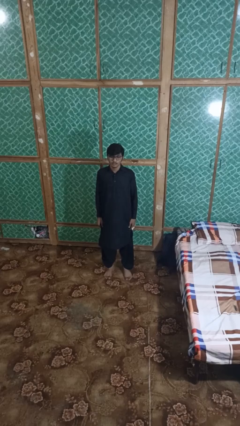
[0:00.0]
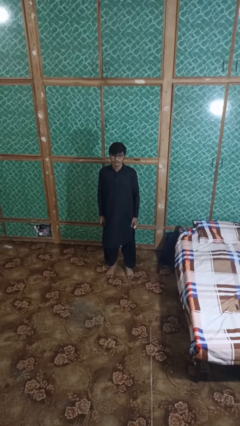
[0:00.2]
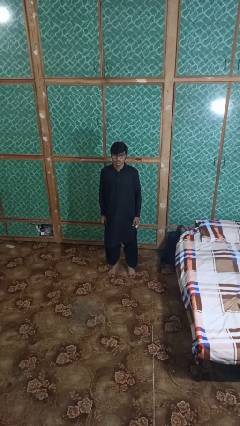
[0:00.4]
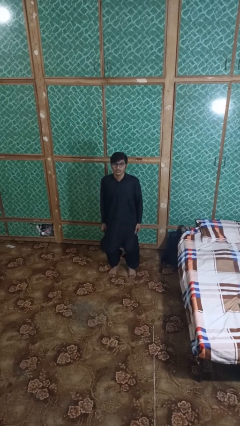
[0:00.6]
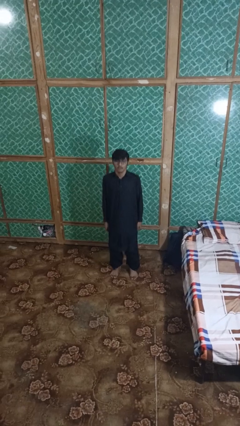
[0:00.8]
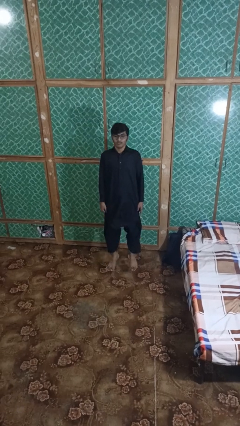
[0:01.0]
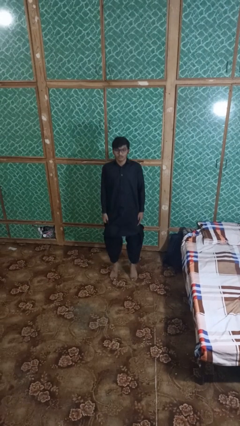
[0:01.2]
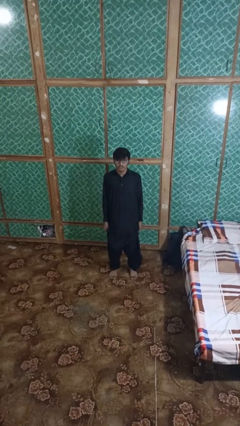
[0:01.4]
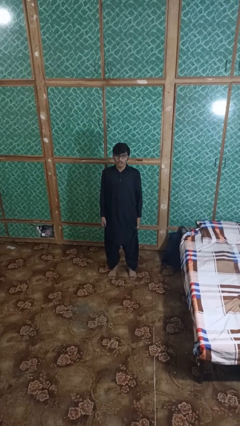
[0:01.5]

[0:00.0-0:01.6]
person jumps

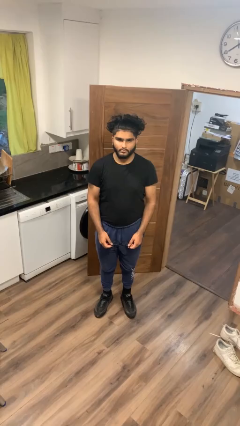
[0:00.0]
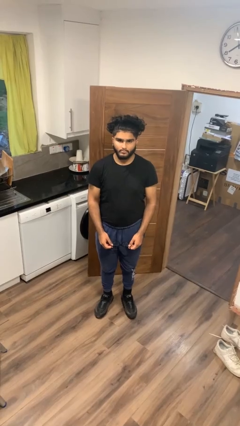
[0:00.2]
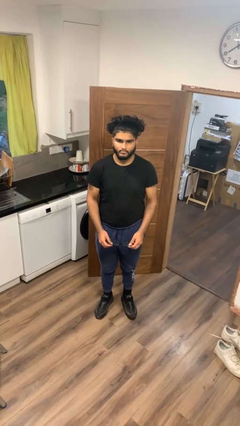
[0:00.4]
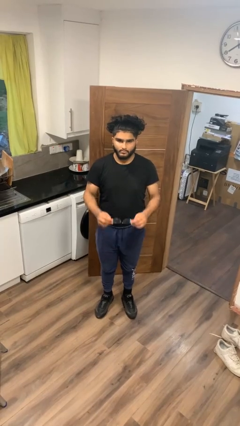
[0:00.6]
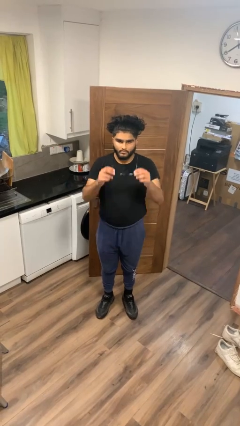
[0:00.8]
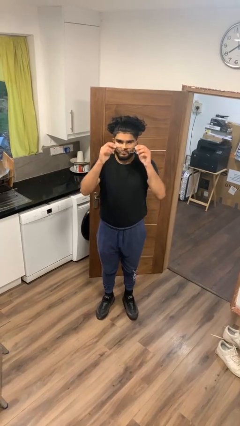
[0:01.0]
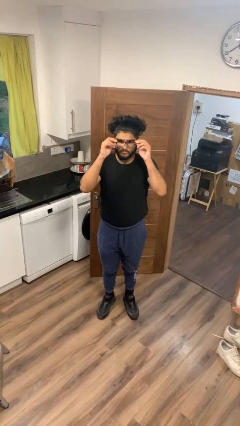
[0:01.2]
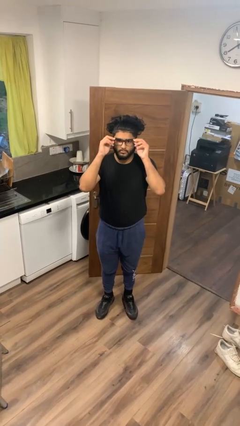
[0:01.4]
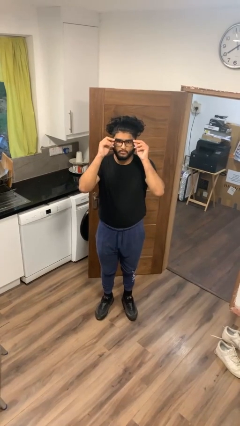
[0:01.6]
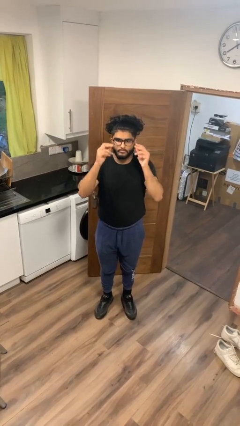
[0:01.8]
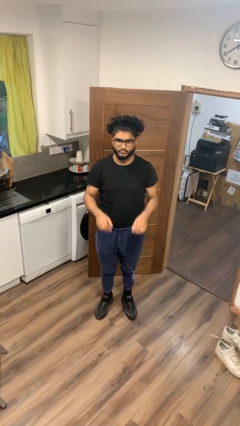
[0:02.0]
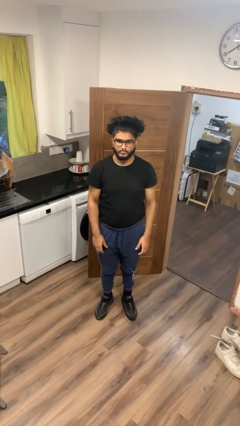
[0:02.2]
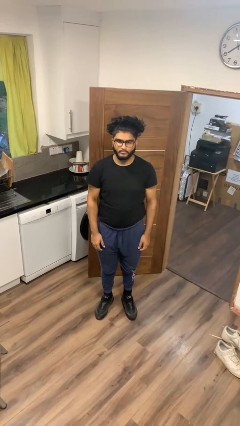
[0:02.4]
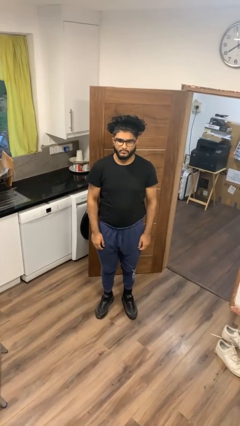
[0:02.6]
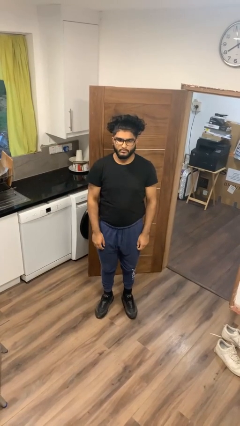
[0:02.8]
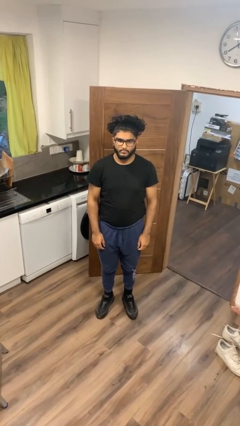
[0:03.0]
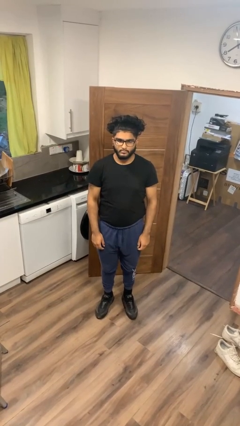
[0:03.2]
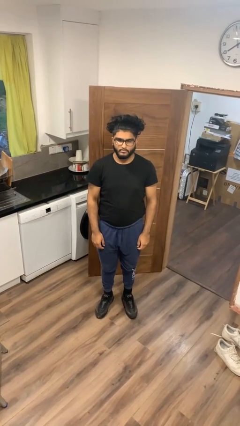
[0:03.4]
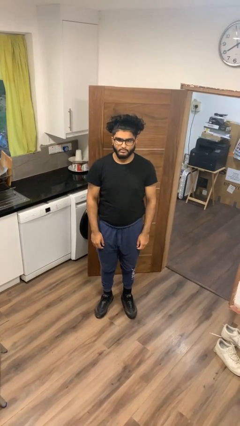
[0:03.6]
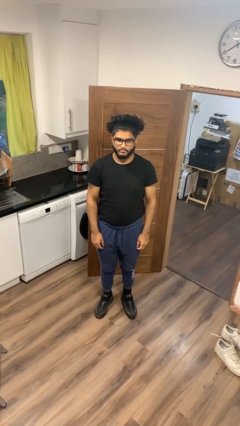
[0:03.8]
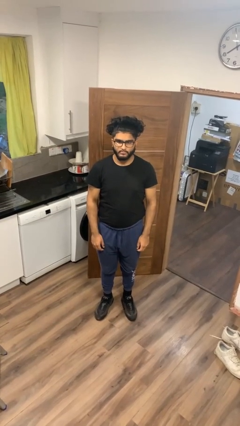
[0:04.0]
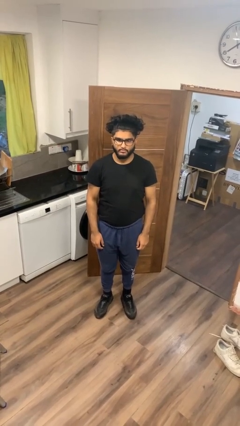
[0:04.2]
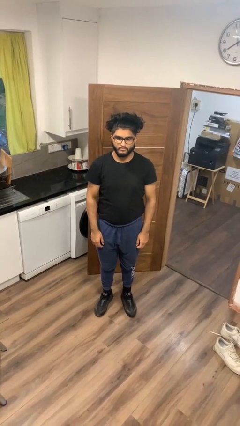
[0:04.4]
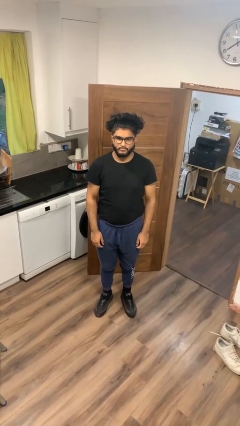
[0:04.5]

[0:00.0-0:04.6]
person puts on glasses

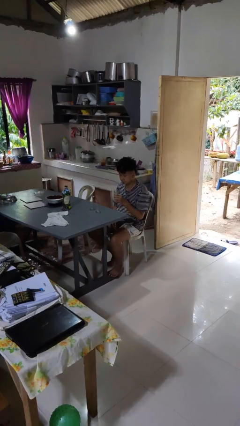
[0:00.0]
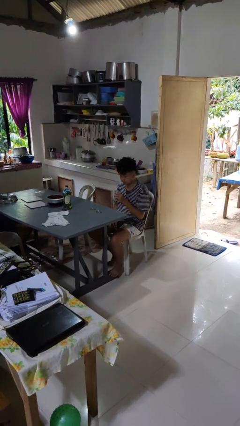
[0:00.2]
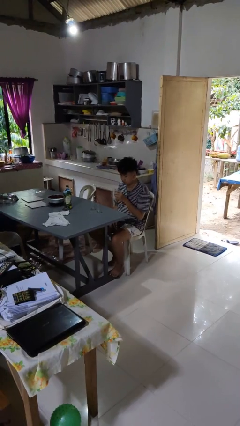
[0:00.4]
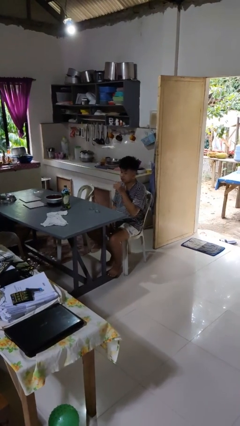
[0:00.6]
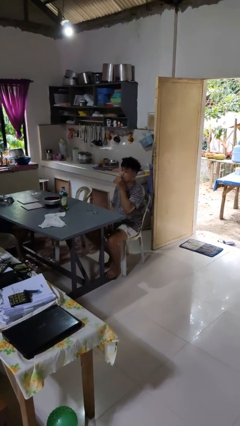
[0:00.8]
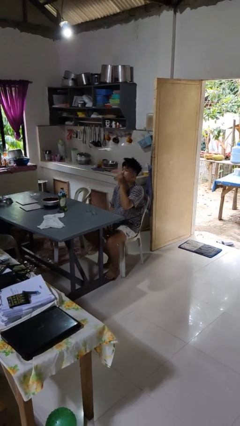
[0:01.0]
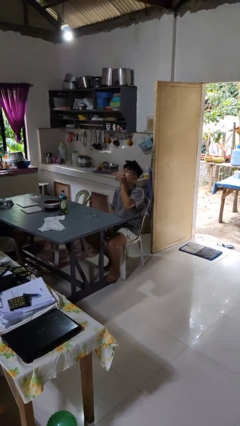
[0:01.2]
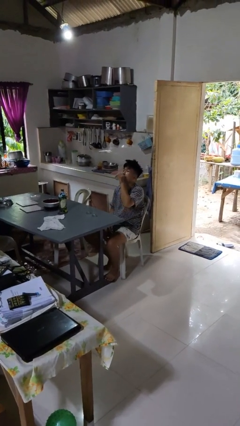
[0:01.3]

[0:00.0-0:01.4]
person drinks from shotglass

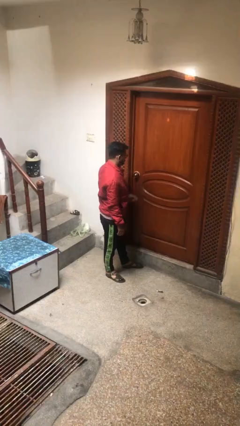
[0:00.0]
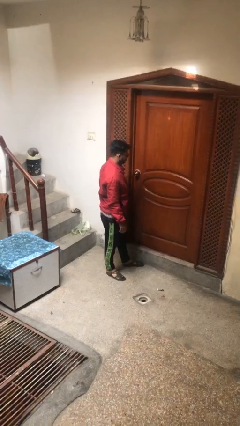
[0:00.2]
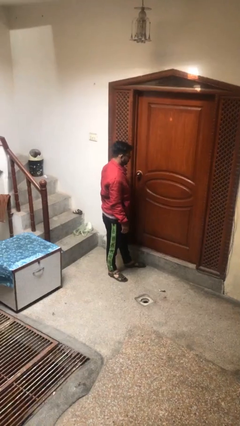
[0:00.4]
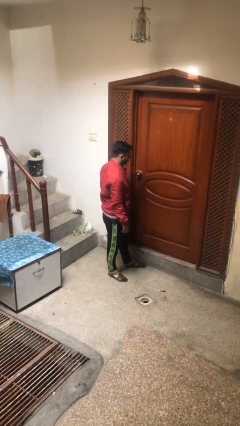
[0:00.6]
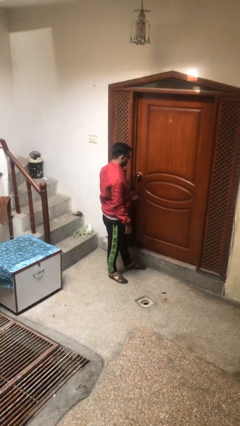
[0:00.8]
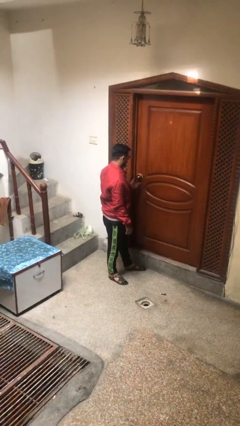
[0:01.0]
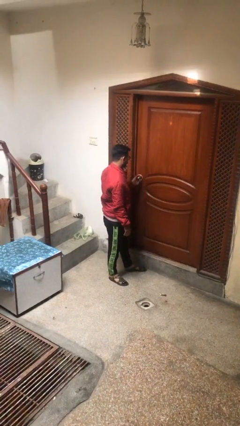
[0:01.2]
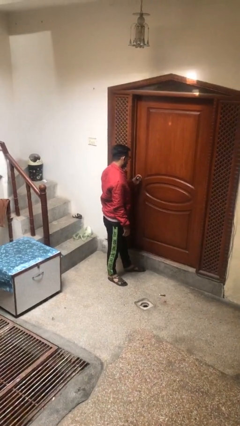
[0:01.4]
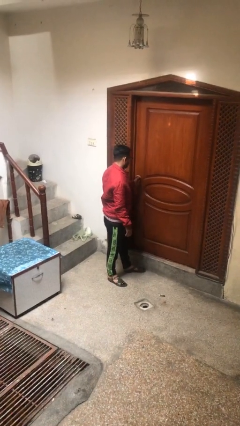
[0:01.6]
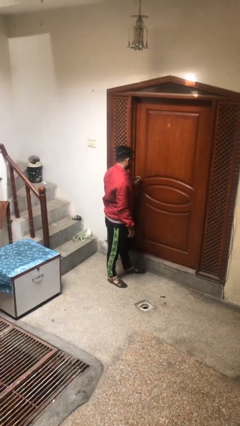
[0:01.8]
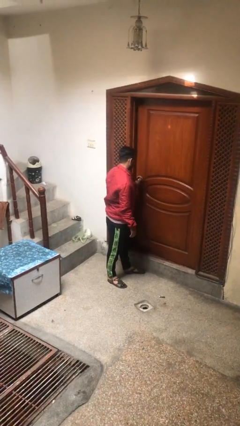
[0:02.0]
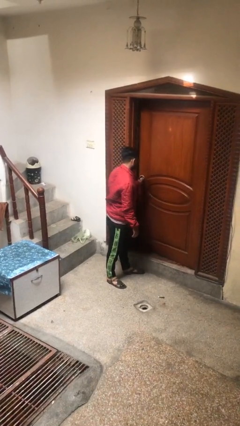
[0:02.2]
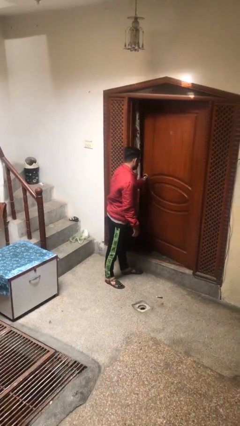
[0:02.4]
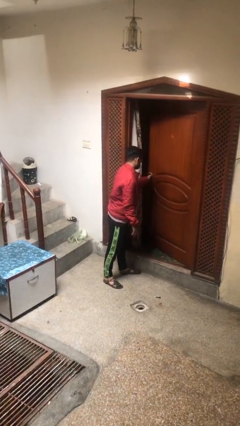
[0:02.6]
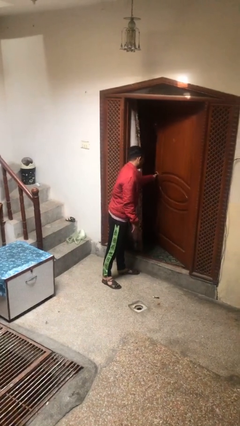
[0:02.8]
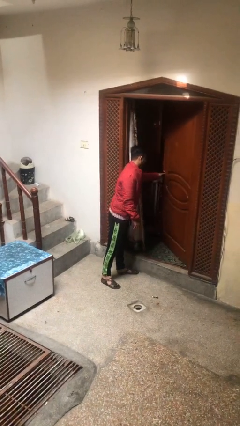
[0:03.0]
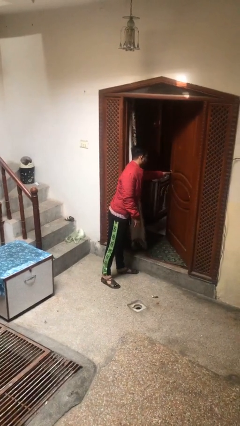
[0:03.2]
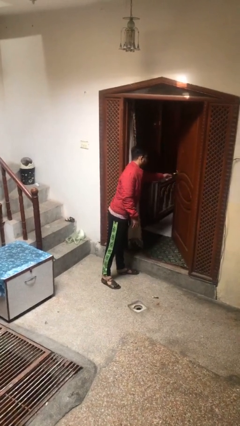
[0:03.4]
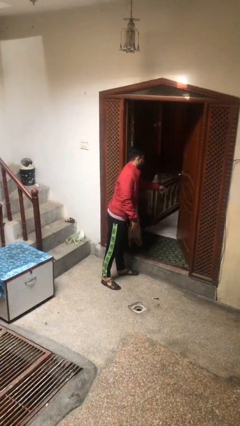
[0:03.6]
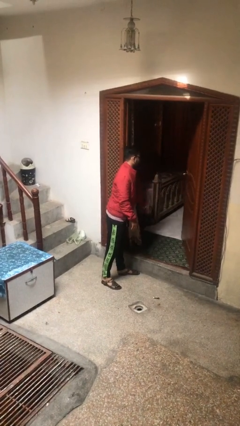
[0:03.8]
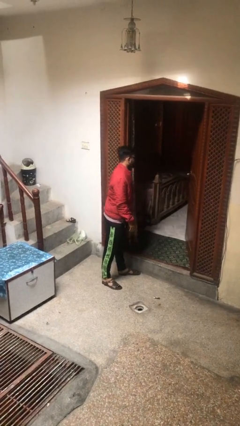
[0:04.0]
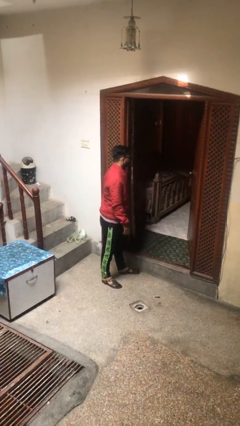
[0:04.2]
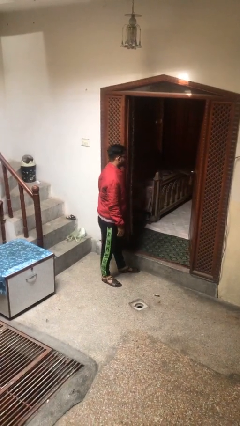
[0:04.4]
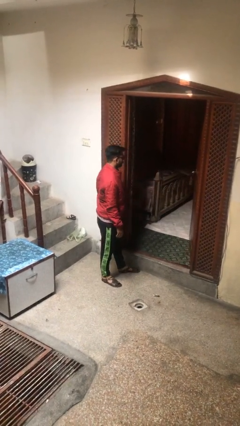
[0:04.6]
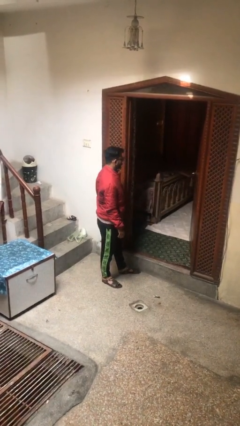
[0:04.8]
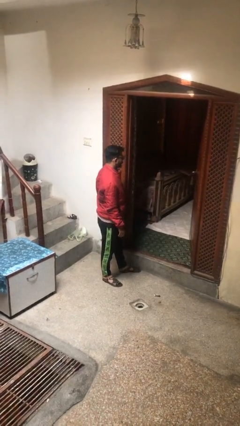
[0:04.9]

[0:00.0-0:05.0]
person opens facility door

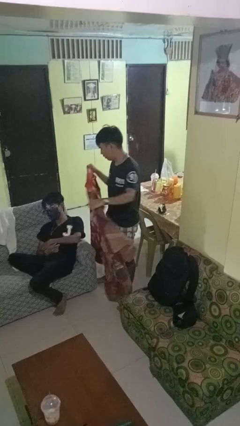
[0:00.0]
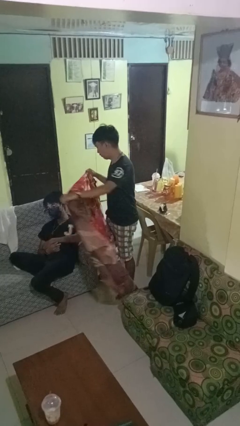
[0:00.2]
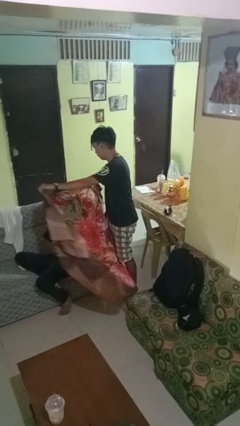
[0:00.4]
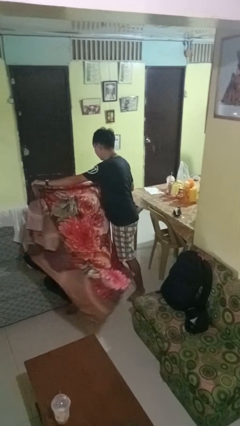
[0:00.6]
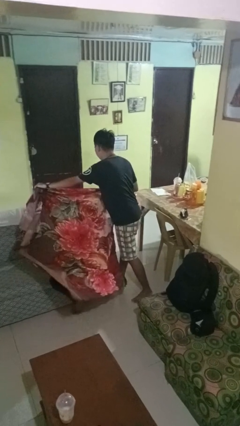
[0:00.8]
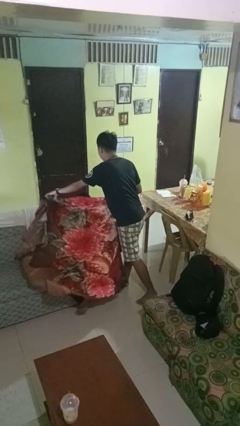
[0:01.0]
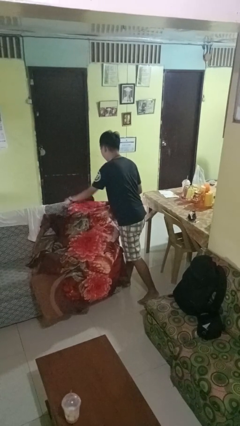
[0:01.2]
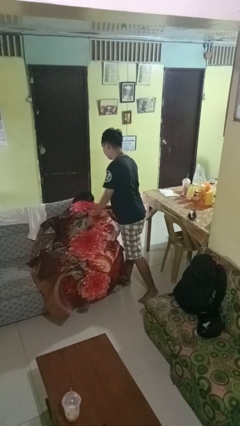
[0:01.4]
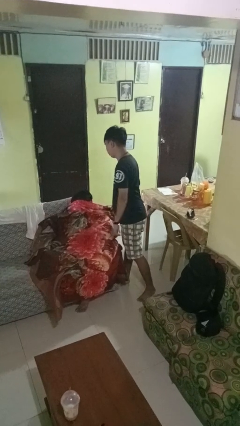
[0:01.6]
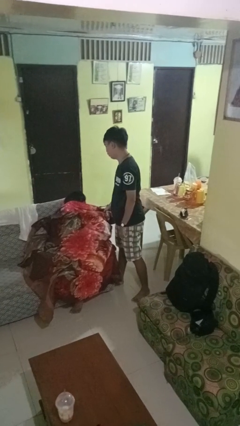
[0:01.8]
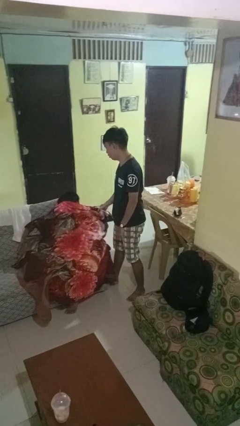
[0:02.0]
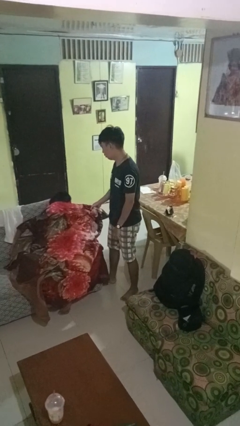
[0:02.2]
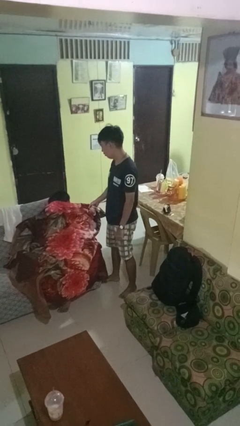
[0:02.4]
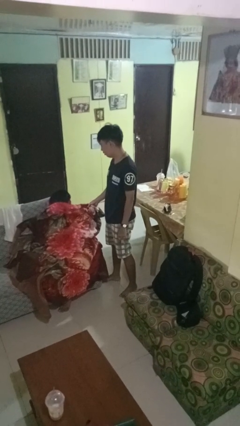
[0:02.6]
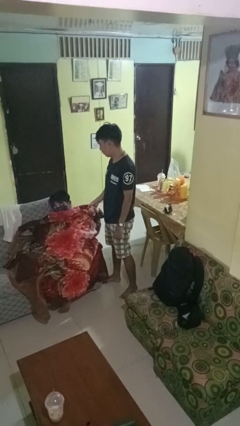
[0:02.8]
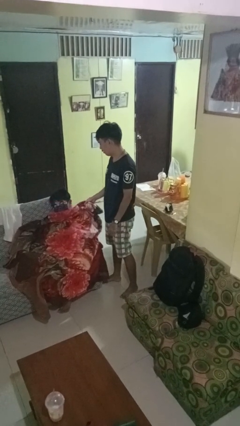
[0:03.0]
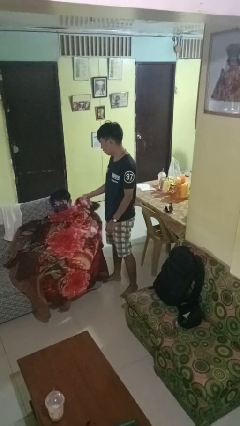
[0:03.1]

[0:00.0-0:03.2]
person covers friend with blanket

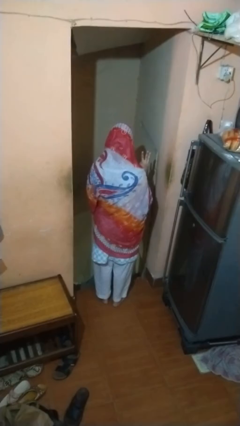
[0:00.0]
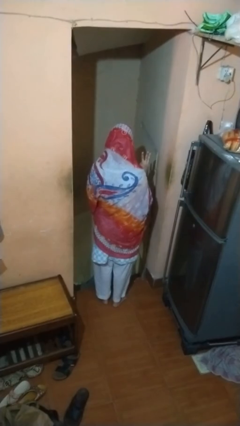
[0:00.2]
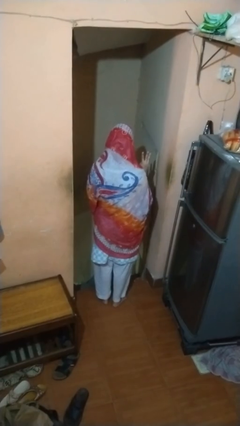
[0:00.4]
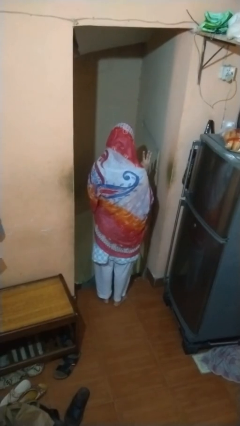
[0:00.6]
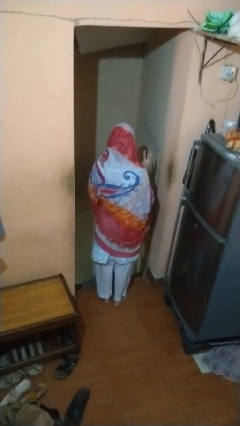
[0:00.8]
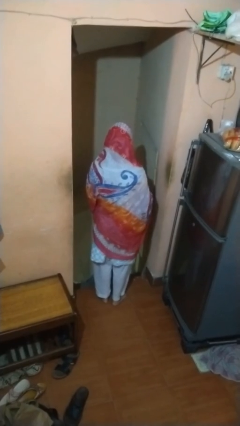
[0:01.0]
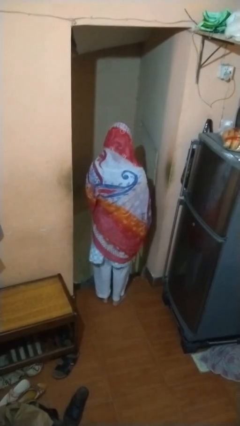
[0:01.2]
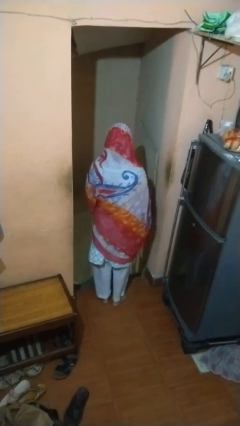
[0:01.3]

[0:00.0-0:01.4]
person gestures number three

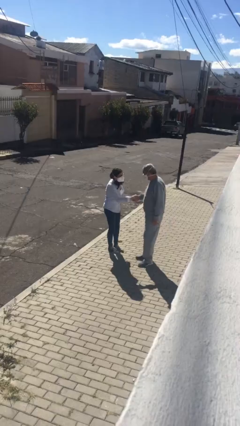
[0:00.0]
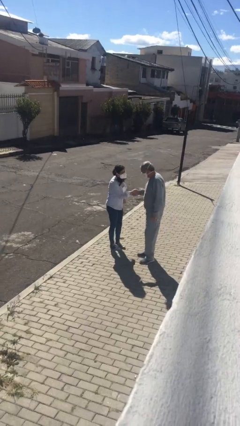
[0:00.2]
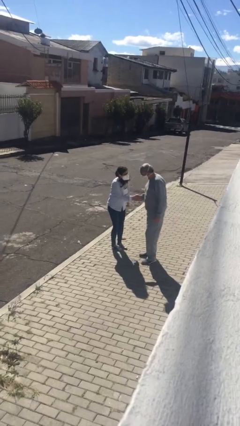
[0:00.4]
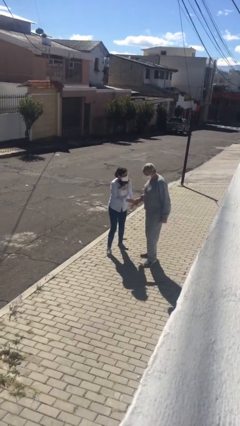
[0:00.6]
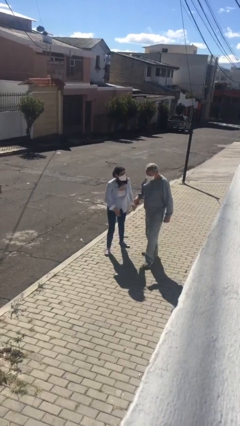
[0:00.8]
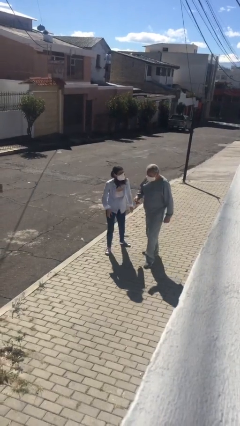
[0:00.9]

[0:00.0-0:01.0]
person shakes hand
